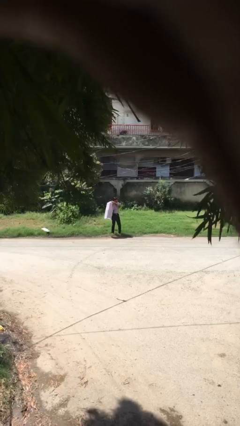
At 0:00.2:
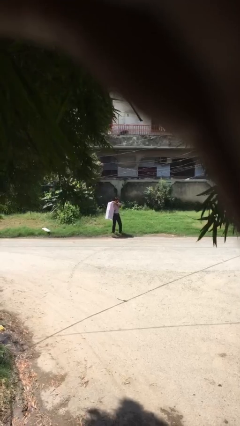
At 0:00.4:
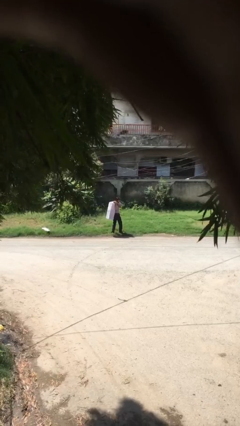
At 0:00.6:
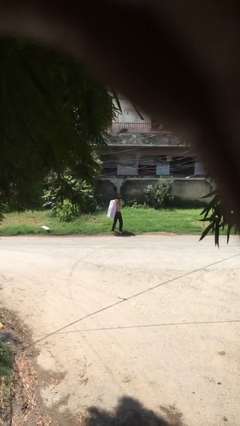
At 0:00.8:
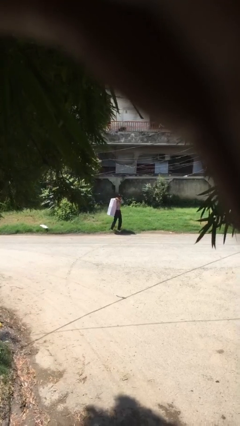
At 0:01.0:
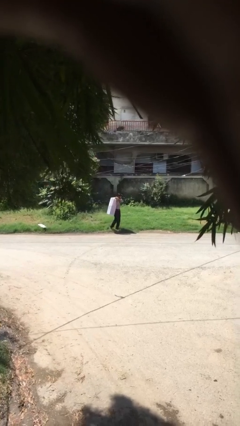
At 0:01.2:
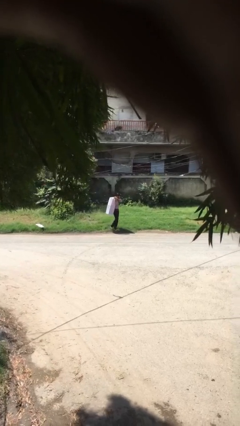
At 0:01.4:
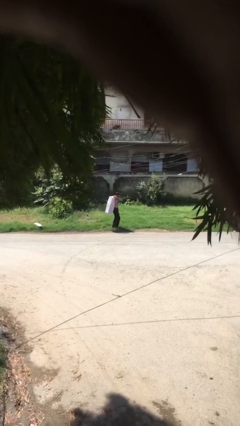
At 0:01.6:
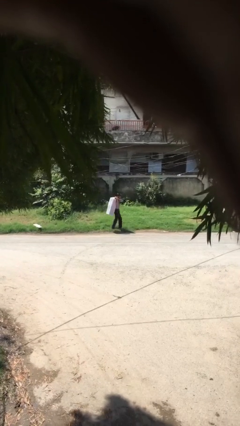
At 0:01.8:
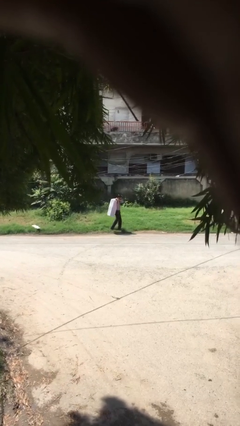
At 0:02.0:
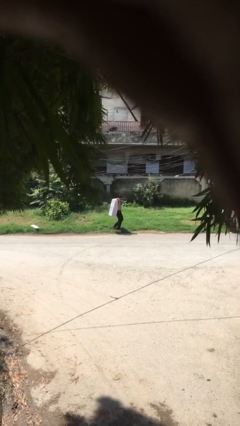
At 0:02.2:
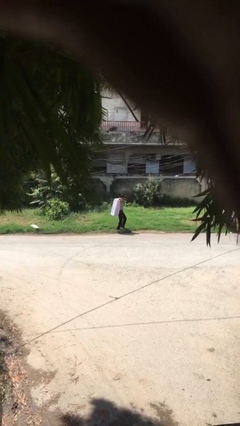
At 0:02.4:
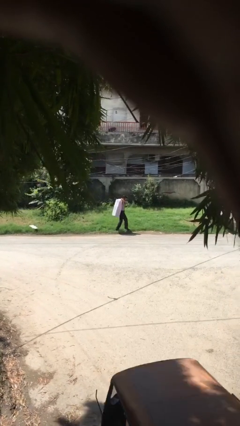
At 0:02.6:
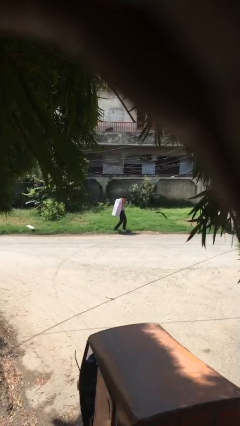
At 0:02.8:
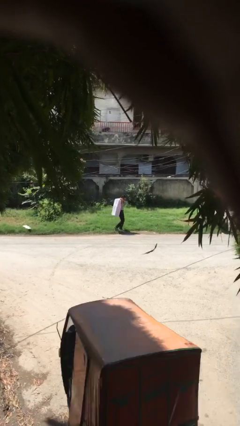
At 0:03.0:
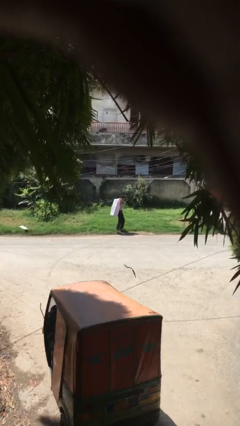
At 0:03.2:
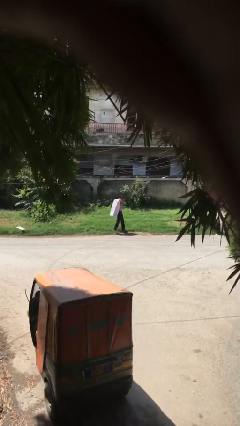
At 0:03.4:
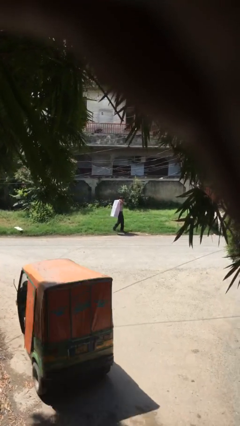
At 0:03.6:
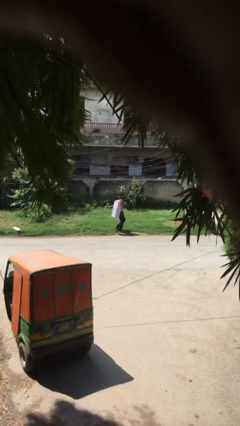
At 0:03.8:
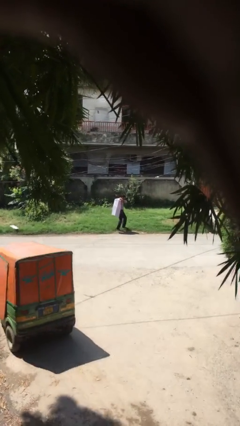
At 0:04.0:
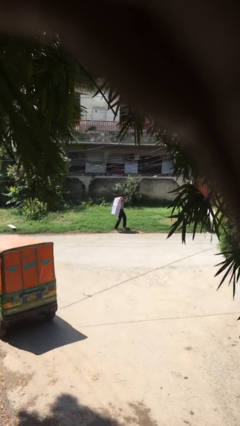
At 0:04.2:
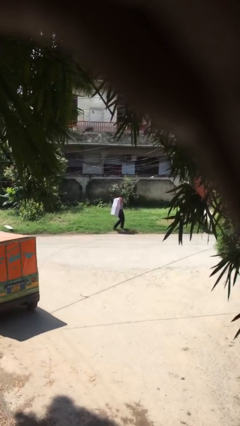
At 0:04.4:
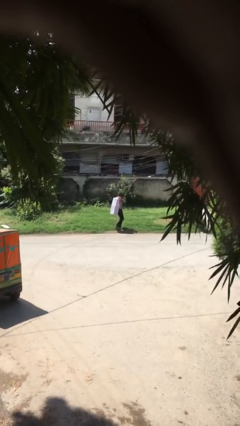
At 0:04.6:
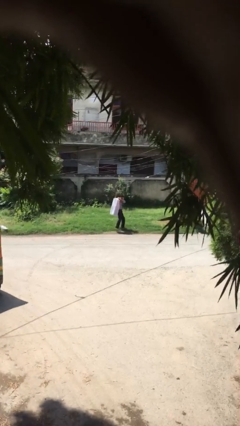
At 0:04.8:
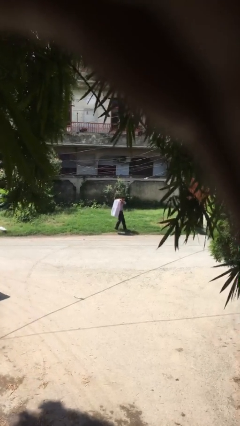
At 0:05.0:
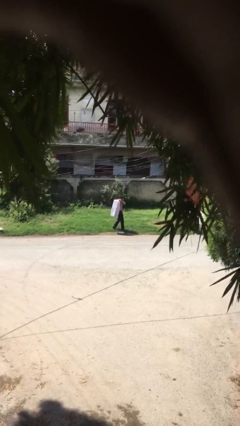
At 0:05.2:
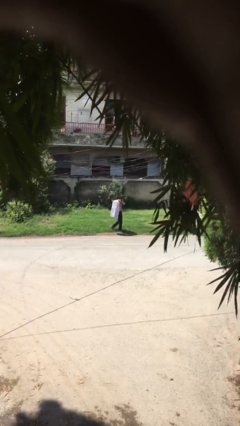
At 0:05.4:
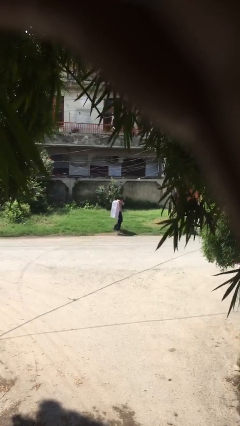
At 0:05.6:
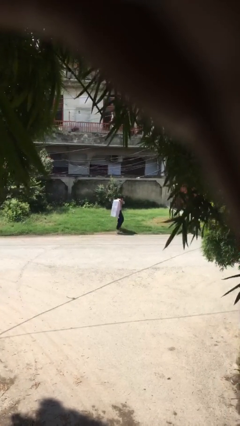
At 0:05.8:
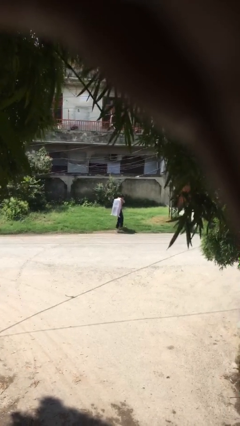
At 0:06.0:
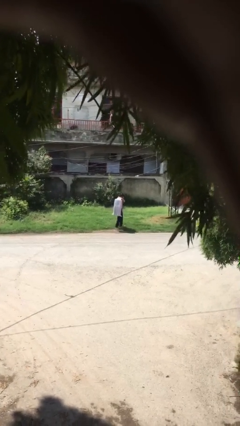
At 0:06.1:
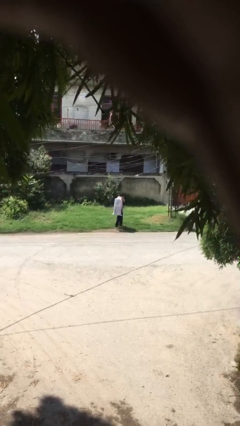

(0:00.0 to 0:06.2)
person carries heavy object

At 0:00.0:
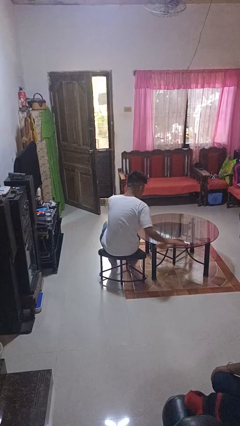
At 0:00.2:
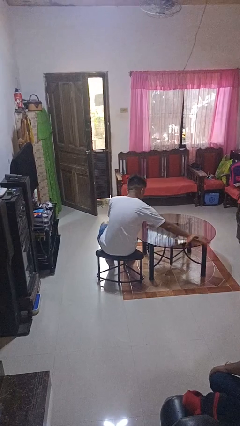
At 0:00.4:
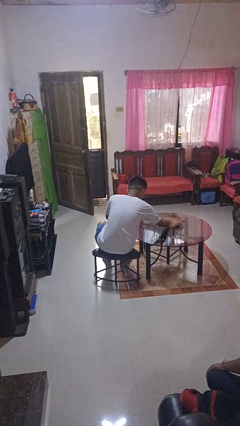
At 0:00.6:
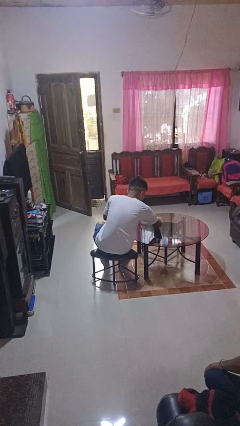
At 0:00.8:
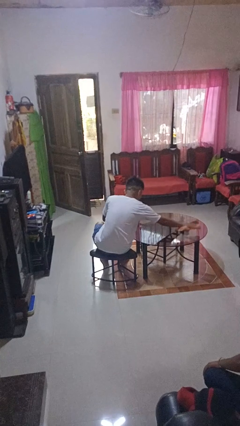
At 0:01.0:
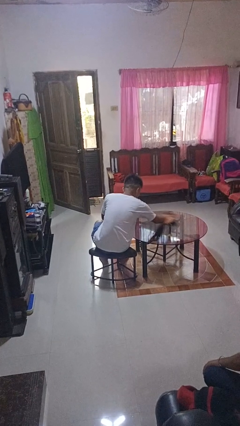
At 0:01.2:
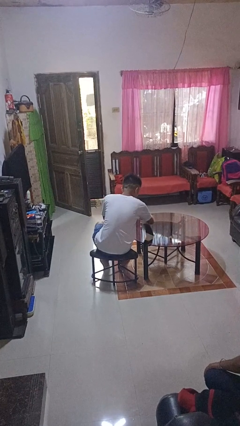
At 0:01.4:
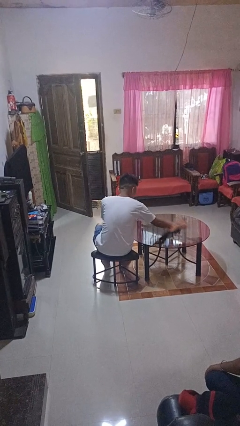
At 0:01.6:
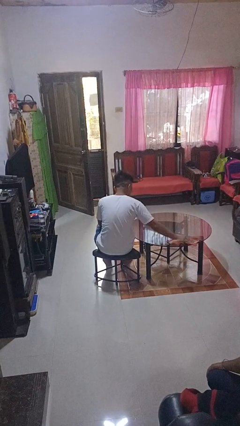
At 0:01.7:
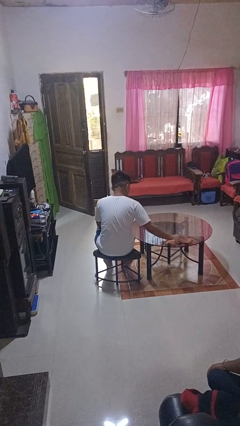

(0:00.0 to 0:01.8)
person cleans table with rag

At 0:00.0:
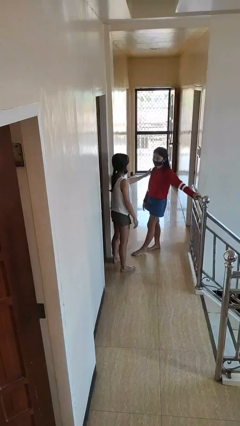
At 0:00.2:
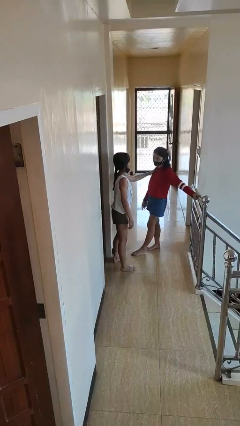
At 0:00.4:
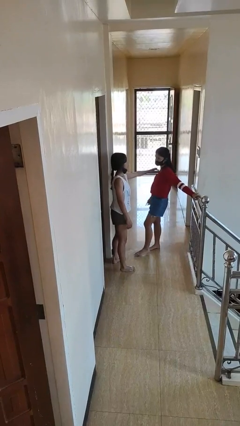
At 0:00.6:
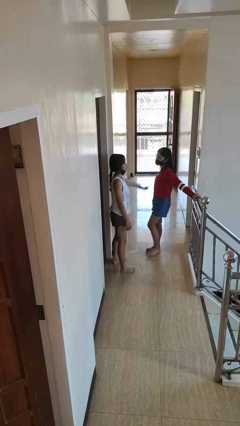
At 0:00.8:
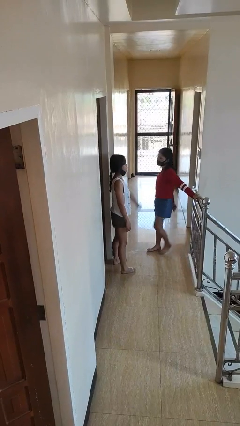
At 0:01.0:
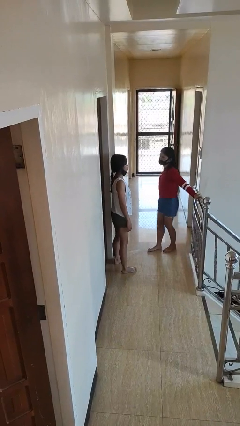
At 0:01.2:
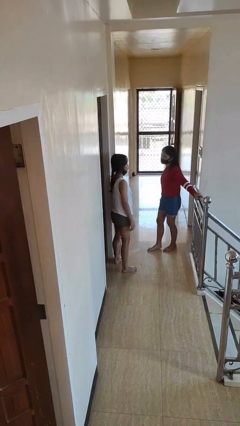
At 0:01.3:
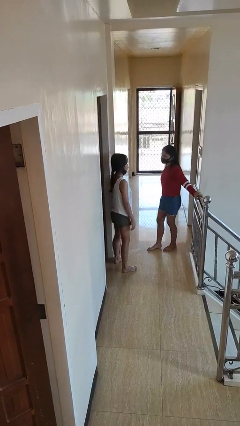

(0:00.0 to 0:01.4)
person shoves person

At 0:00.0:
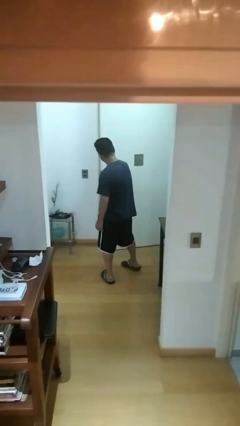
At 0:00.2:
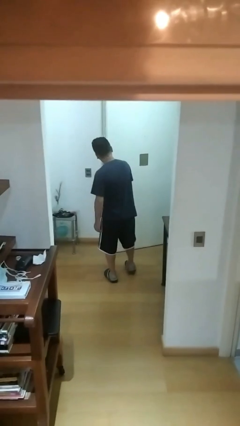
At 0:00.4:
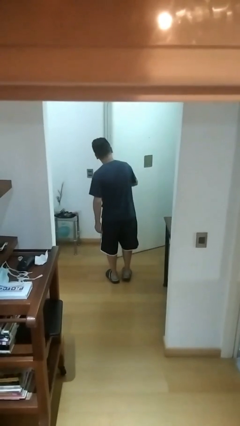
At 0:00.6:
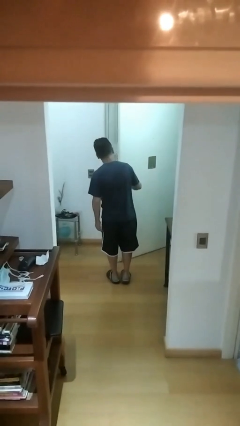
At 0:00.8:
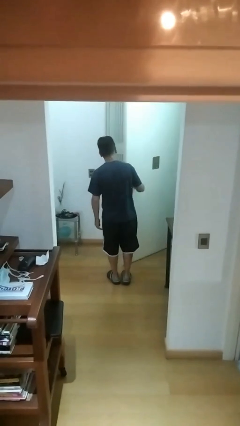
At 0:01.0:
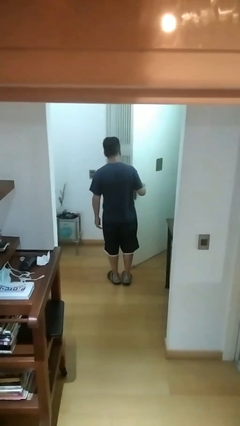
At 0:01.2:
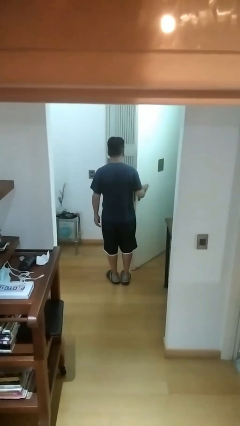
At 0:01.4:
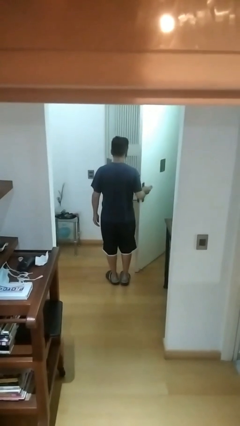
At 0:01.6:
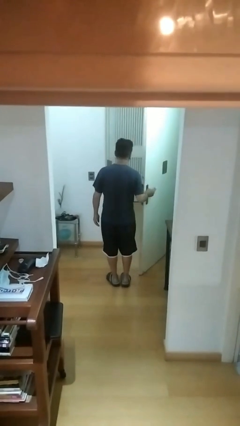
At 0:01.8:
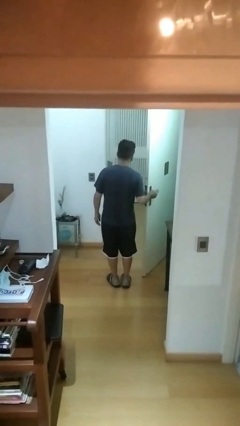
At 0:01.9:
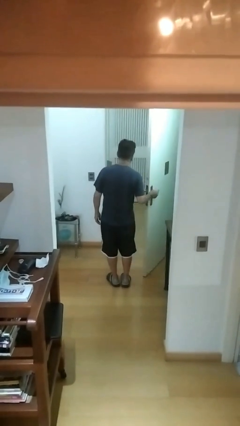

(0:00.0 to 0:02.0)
person opens facility door

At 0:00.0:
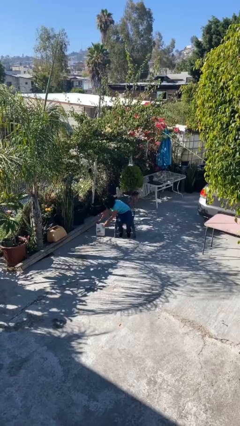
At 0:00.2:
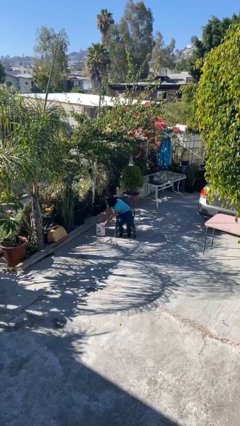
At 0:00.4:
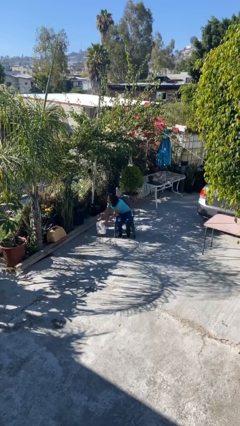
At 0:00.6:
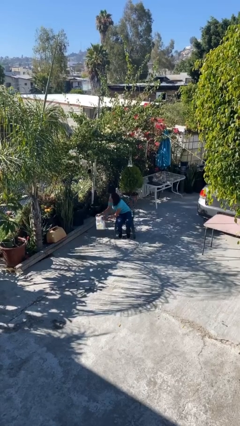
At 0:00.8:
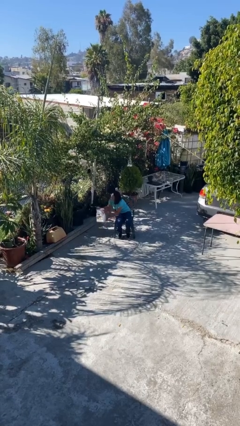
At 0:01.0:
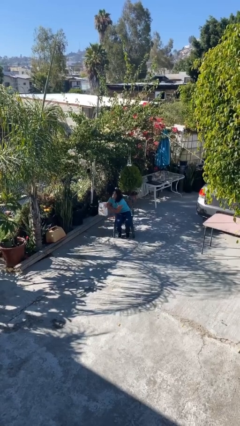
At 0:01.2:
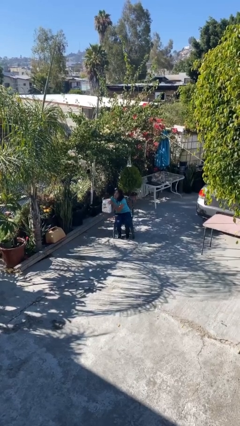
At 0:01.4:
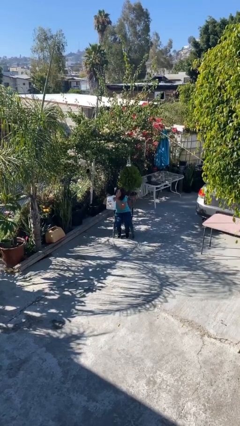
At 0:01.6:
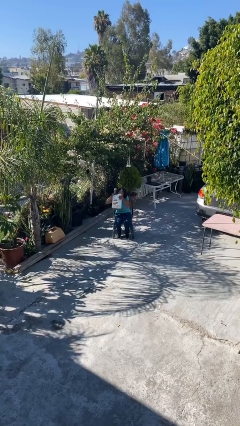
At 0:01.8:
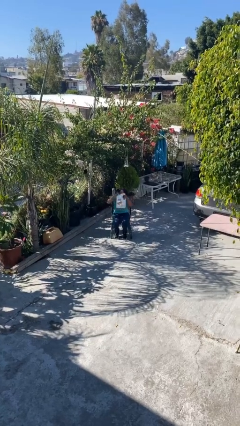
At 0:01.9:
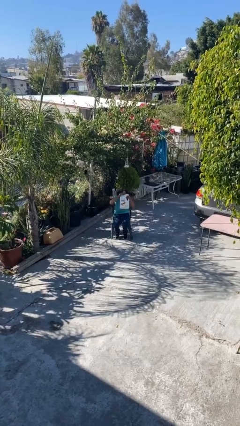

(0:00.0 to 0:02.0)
person picks up object from floor

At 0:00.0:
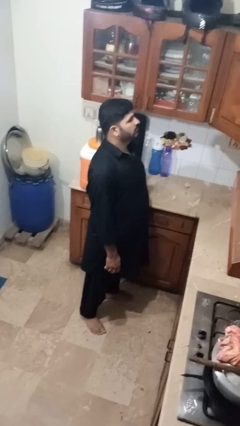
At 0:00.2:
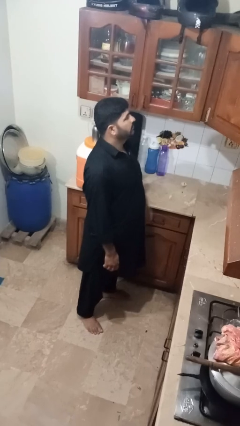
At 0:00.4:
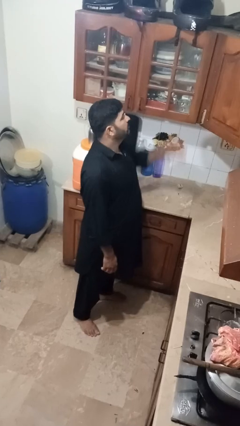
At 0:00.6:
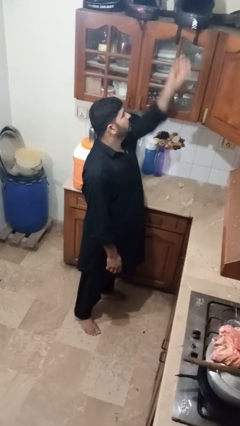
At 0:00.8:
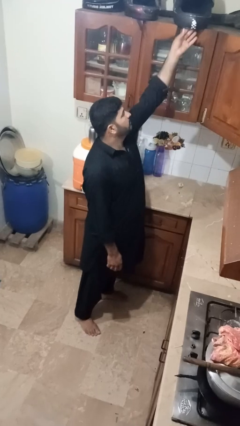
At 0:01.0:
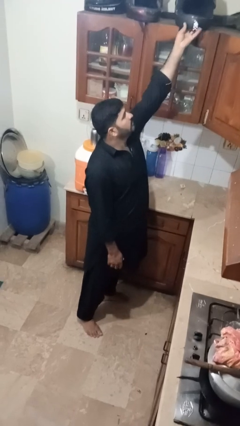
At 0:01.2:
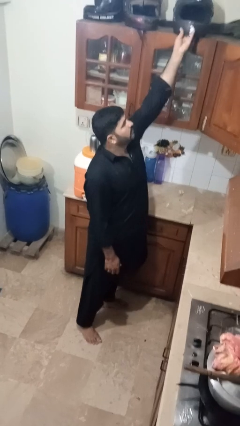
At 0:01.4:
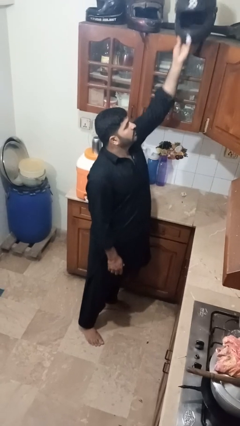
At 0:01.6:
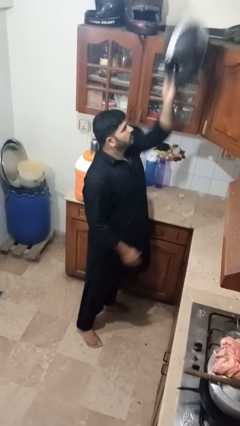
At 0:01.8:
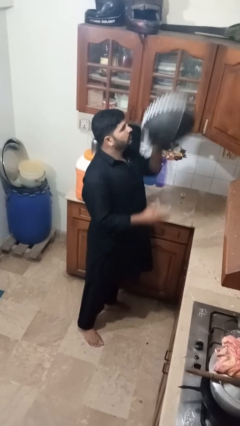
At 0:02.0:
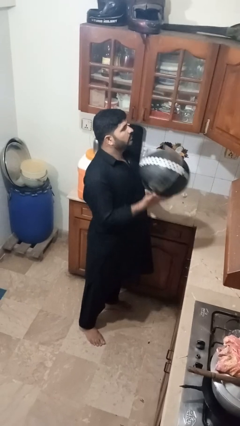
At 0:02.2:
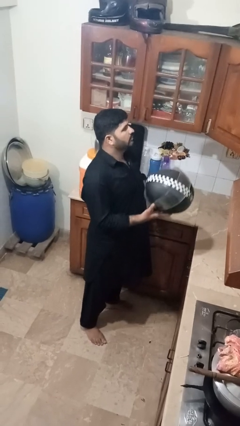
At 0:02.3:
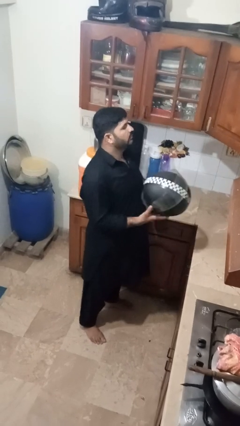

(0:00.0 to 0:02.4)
person picks up object from shelf

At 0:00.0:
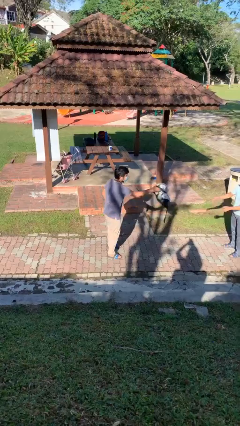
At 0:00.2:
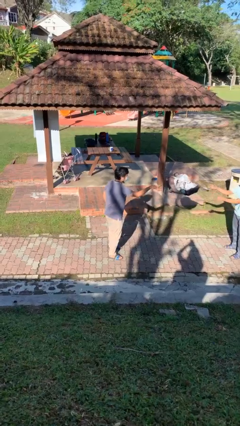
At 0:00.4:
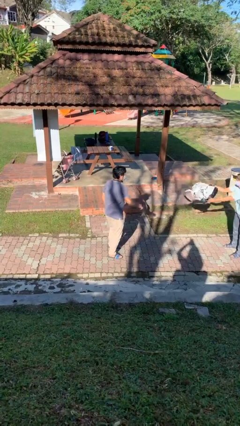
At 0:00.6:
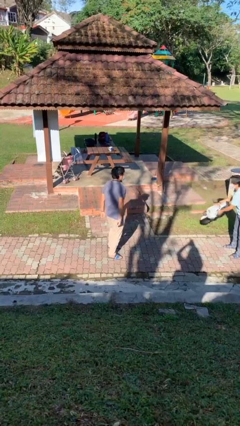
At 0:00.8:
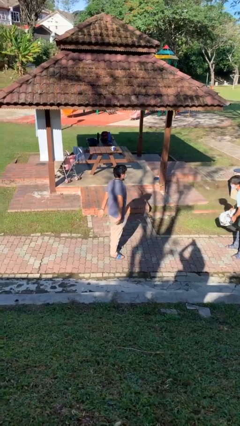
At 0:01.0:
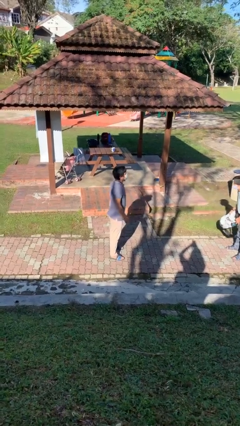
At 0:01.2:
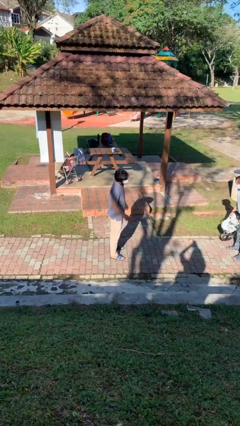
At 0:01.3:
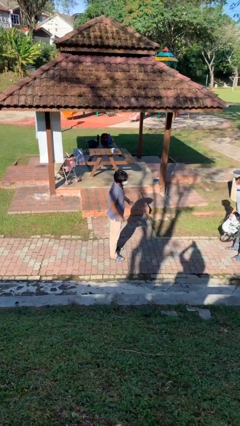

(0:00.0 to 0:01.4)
person throws object to person
